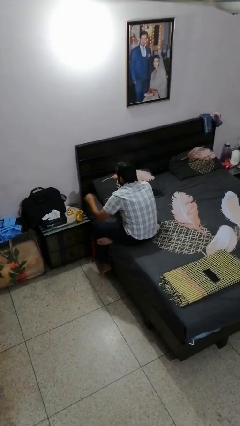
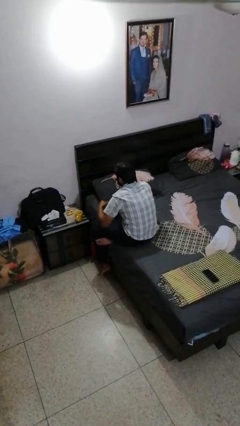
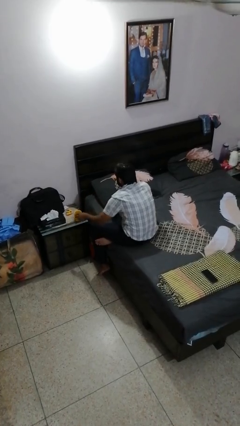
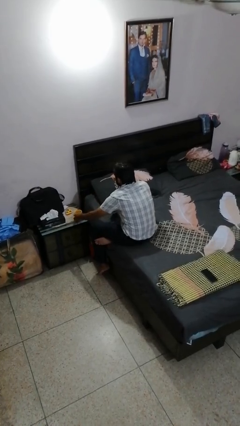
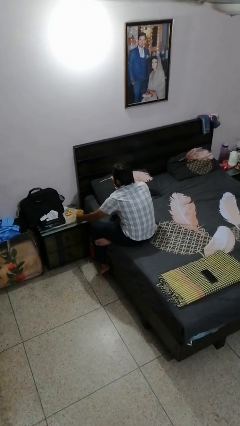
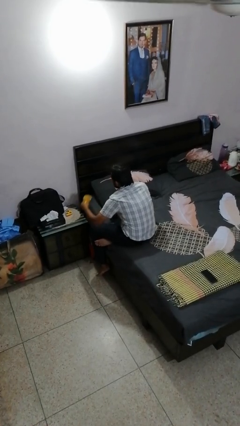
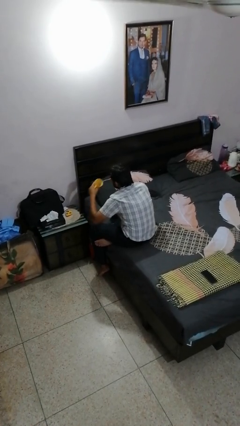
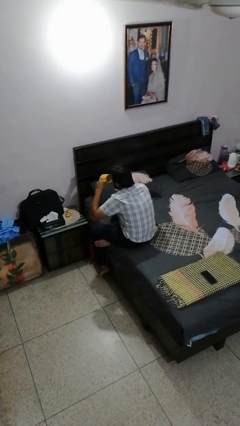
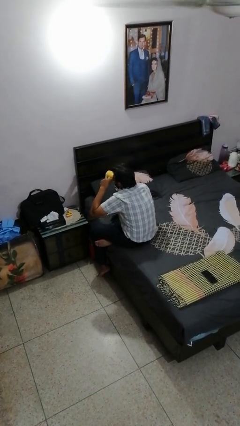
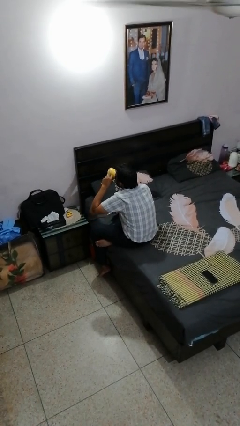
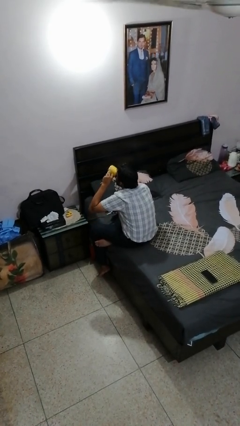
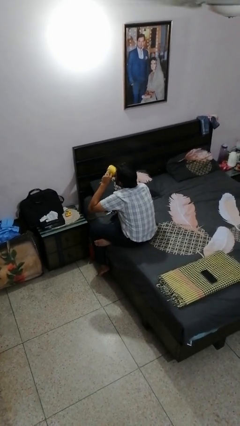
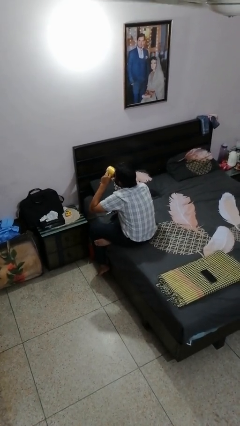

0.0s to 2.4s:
person drinks from mug

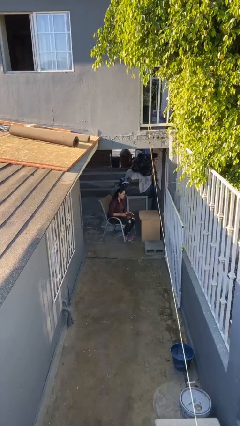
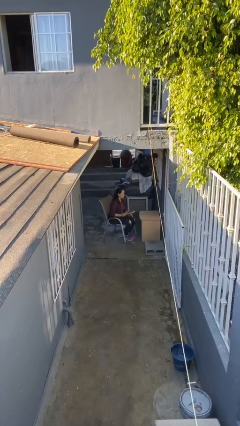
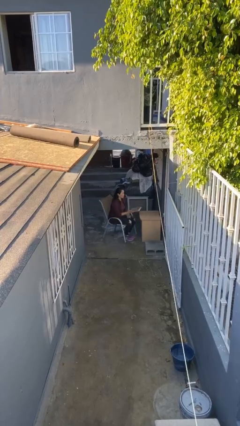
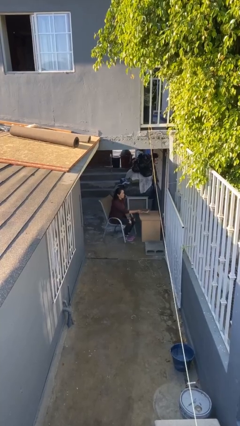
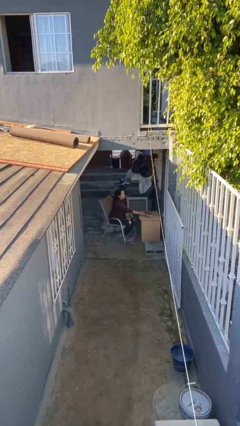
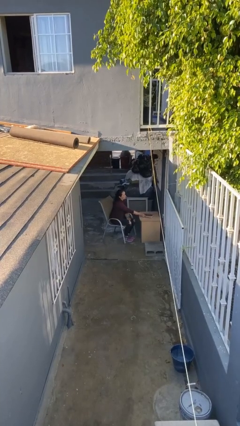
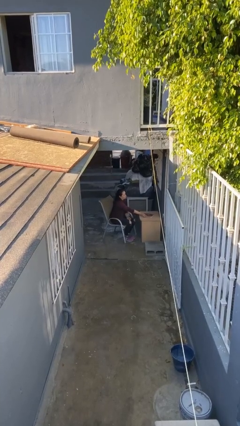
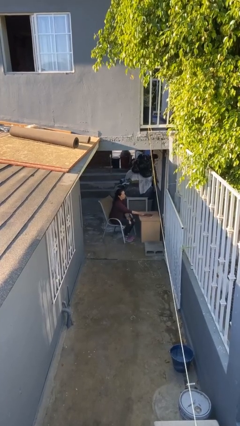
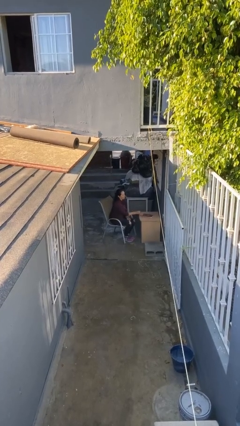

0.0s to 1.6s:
person puts down object on table

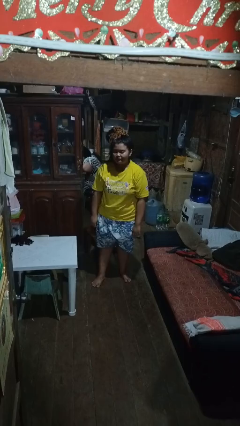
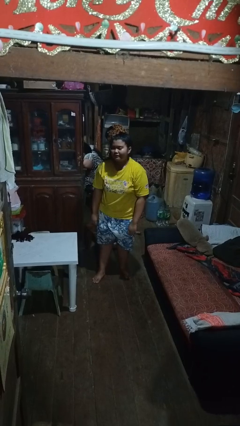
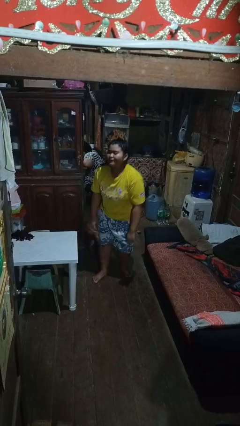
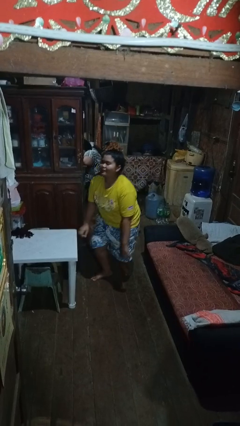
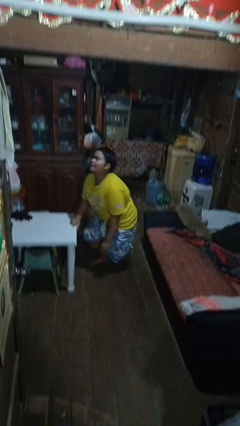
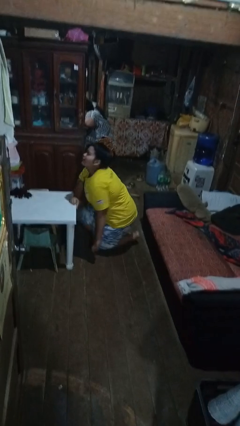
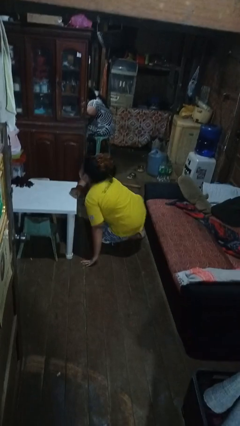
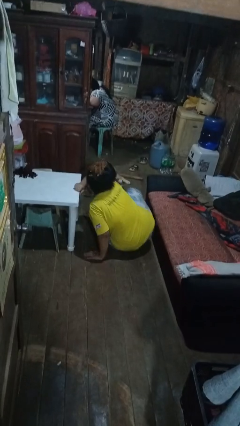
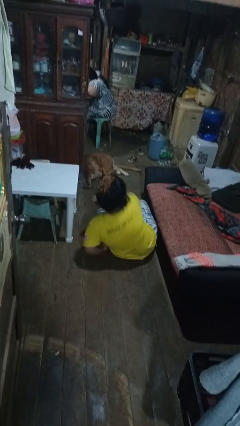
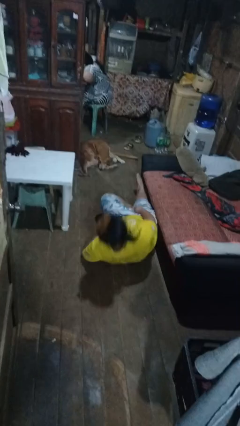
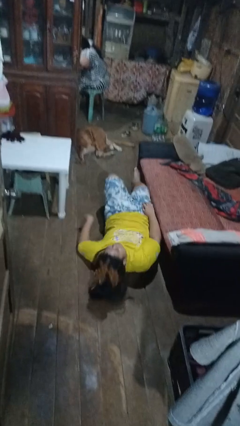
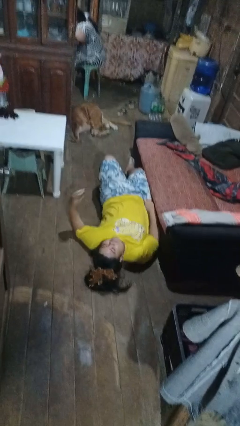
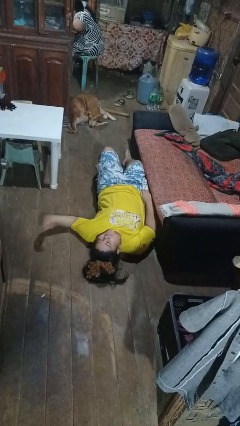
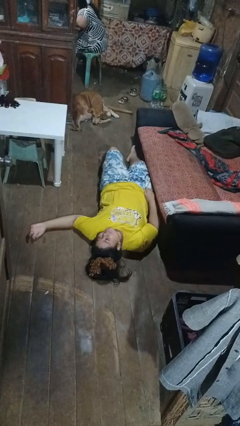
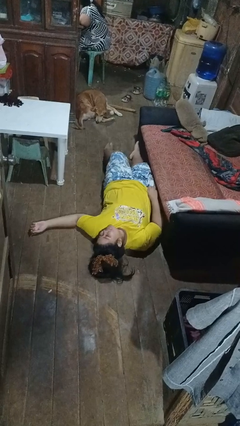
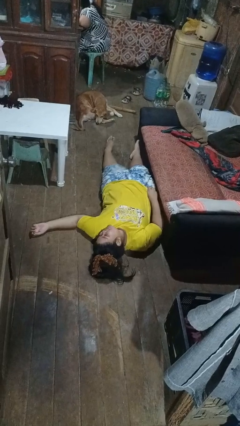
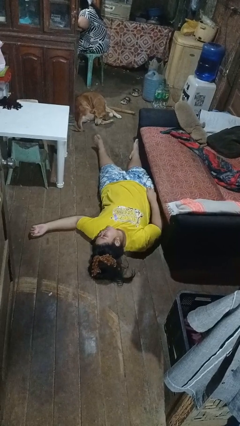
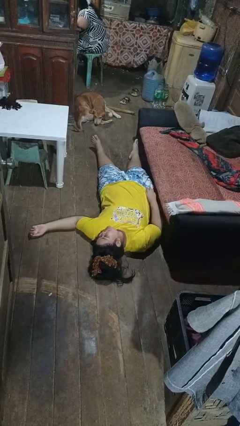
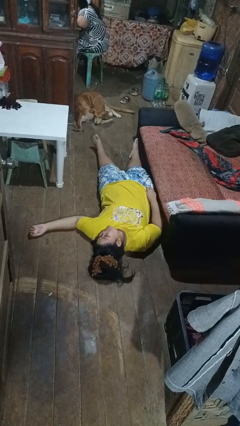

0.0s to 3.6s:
person falls while standing

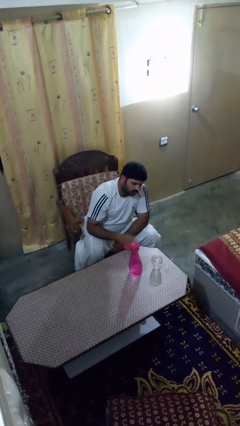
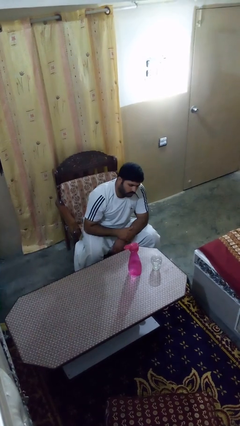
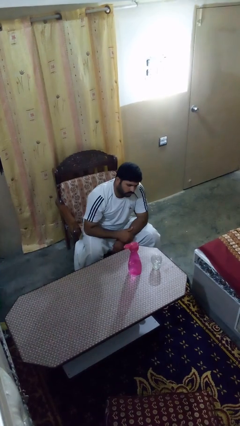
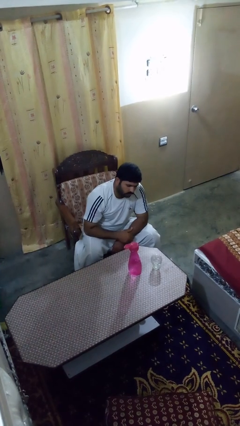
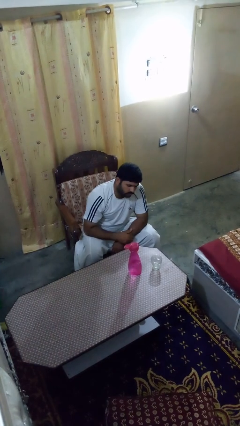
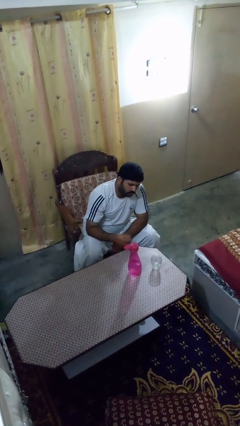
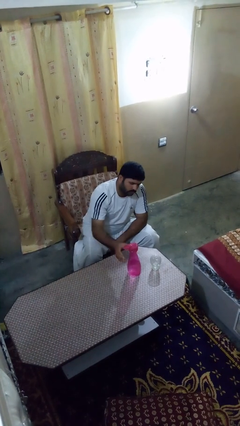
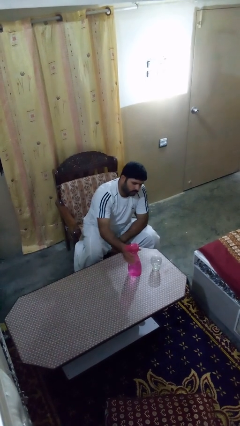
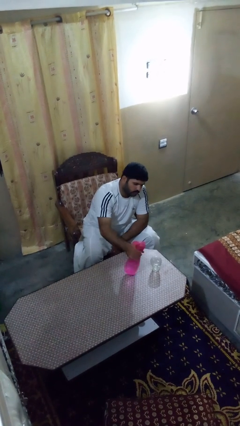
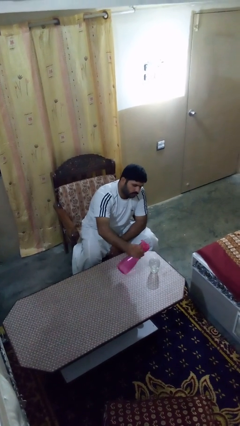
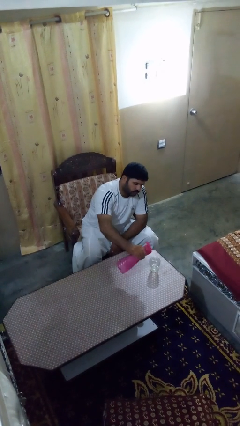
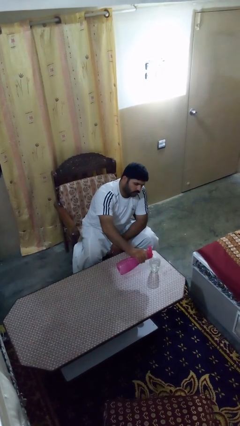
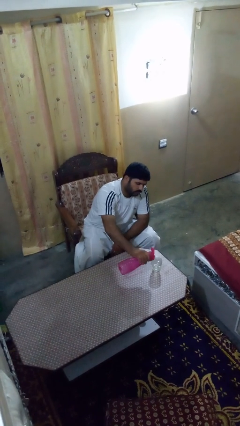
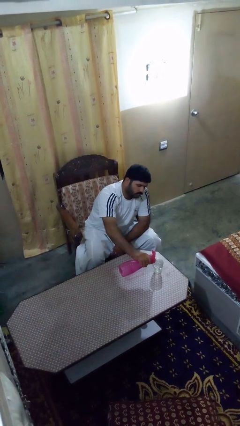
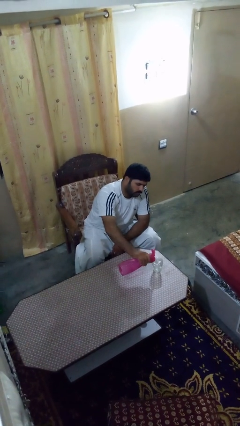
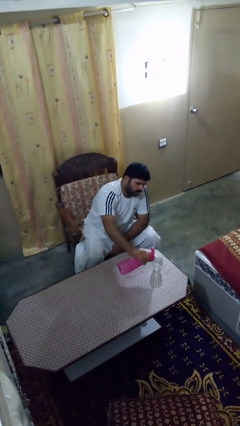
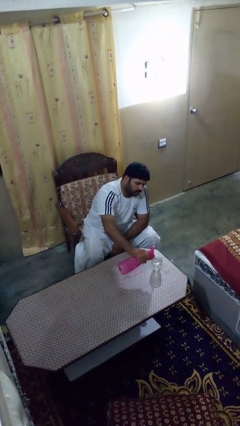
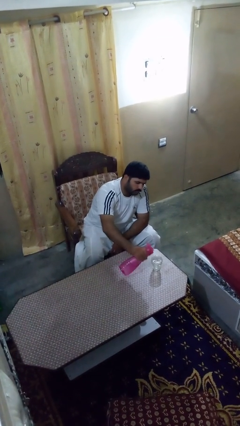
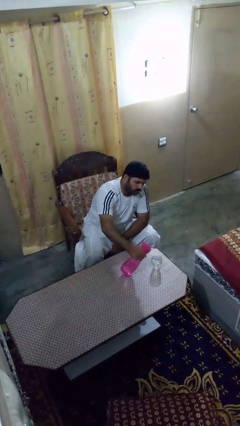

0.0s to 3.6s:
person pours liquid into cup

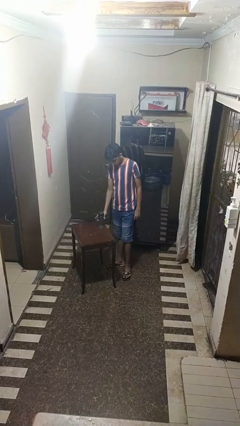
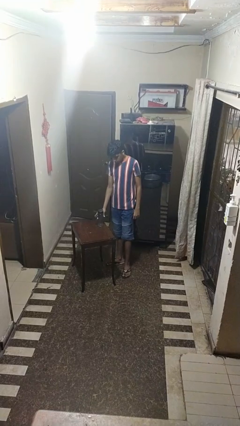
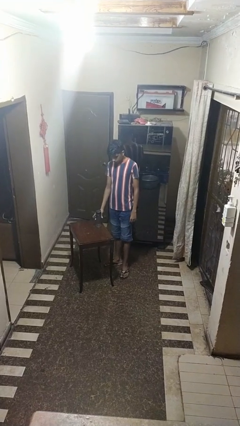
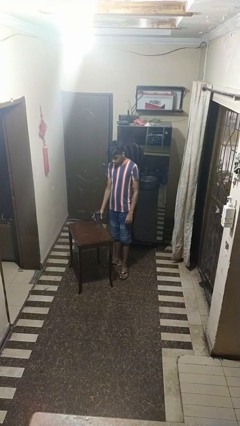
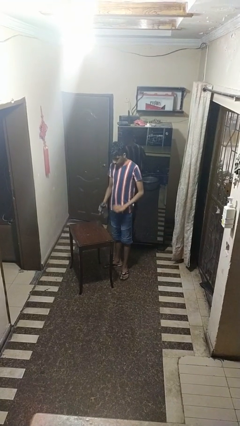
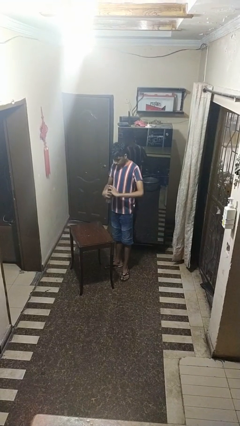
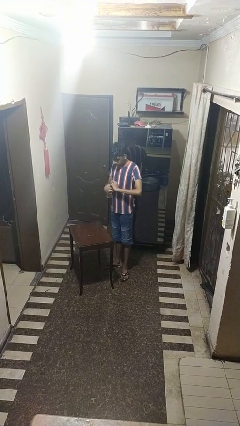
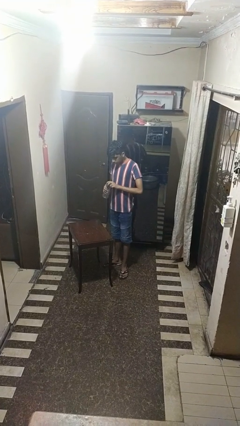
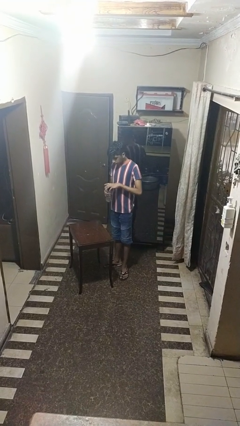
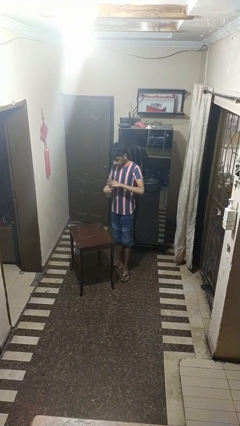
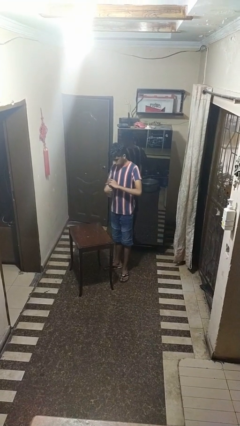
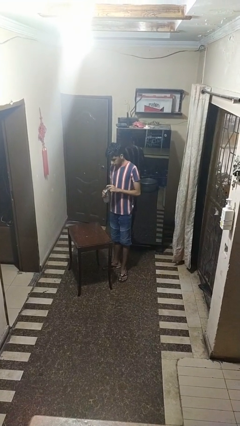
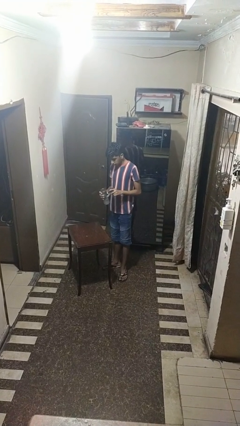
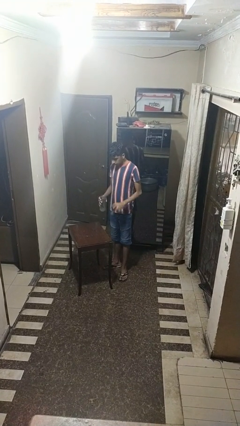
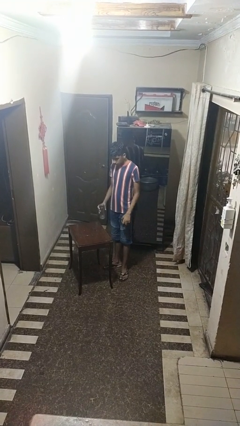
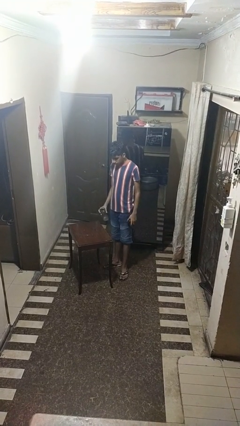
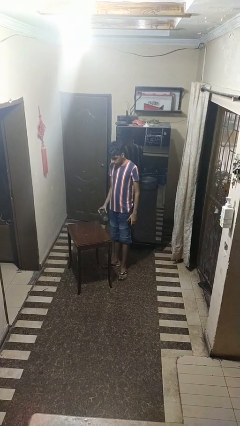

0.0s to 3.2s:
person unscrews lid from bottle

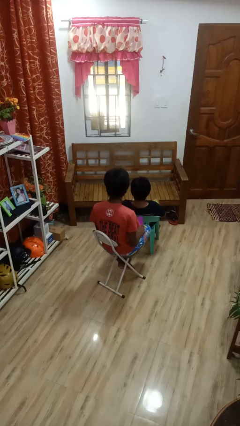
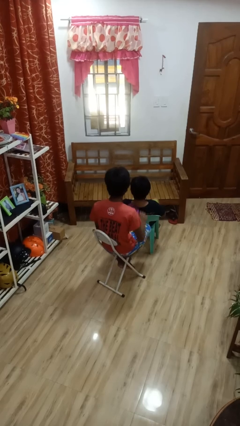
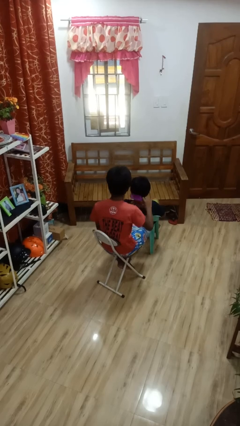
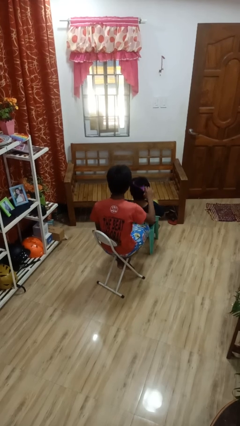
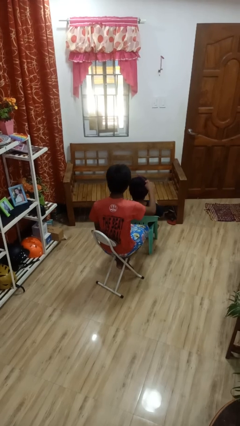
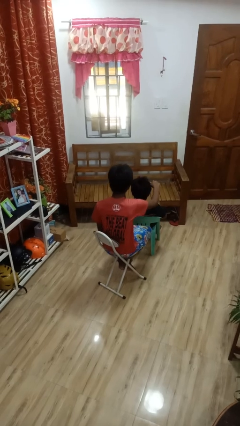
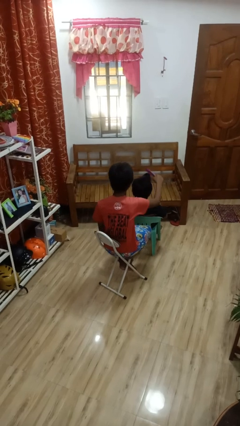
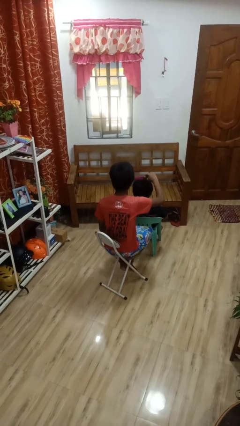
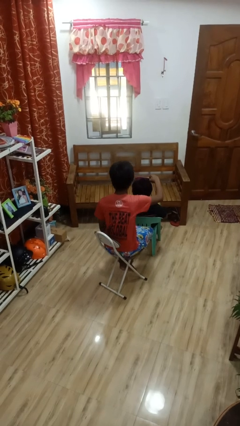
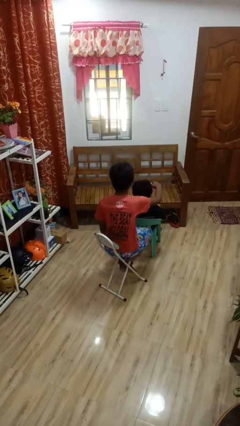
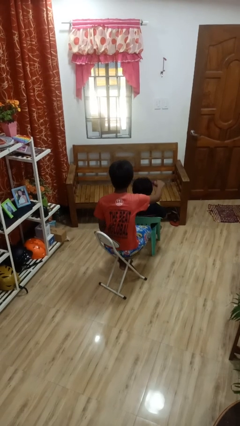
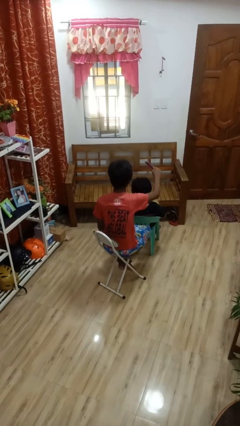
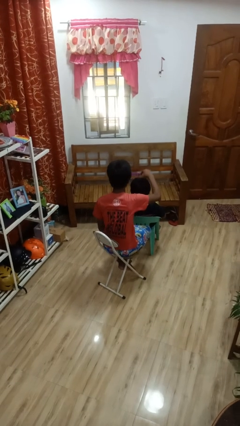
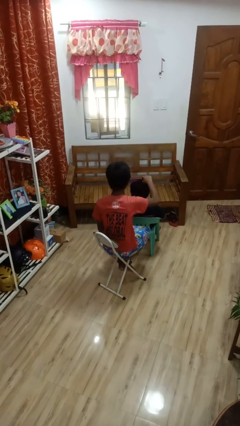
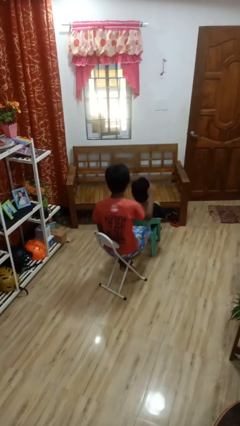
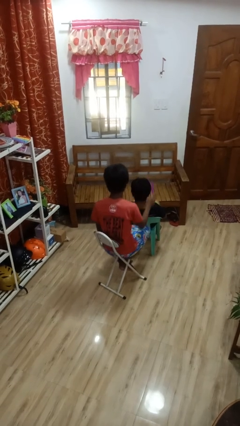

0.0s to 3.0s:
person brushes hair of person
